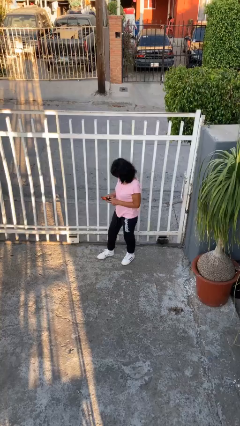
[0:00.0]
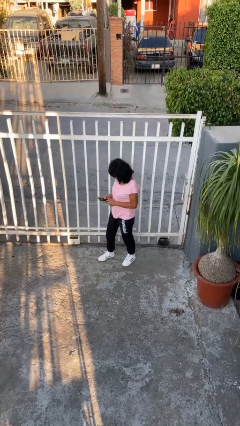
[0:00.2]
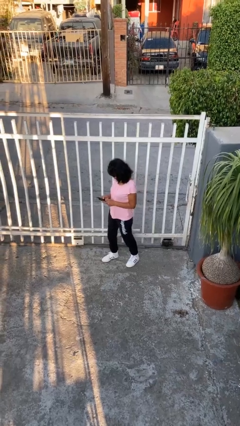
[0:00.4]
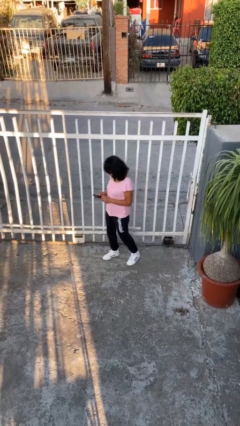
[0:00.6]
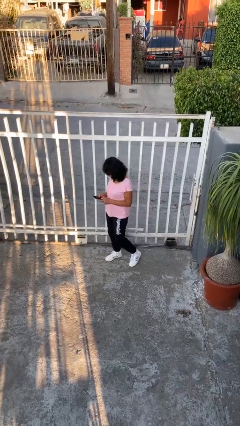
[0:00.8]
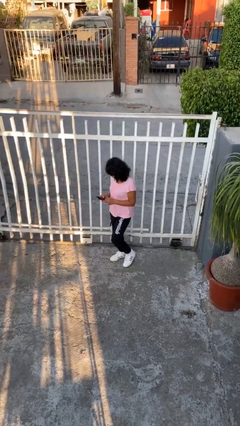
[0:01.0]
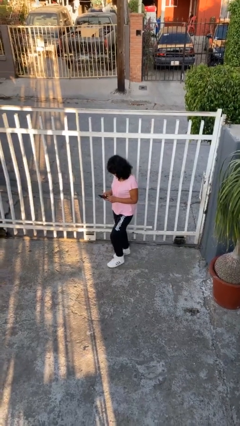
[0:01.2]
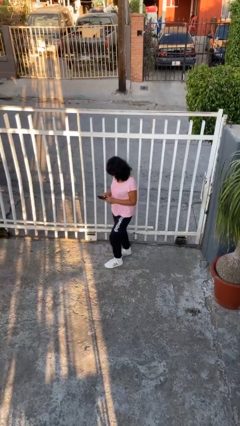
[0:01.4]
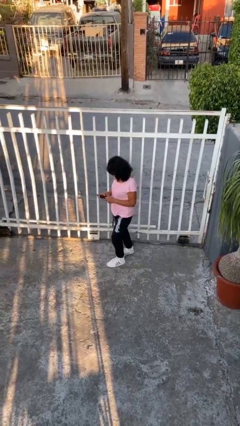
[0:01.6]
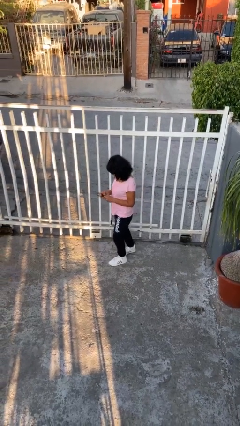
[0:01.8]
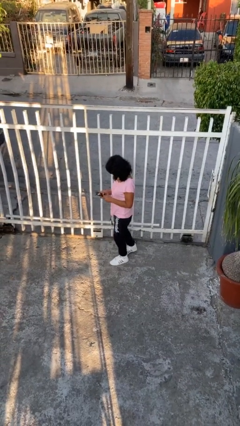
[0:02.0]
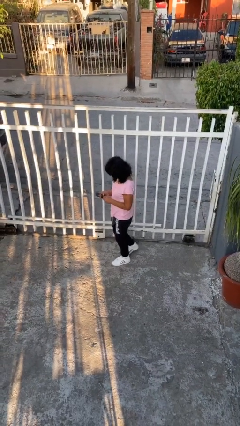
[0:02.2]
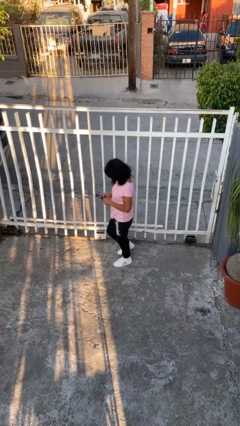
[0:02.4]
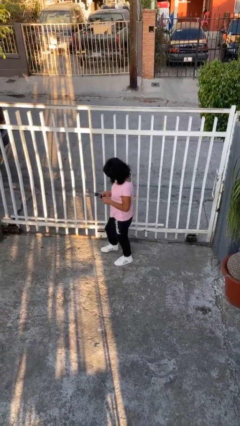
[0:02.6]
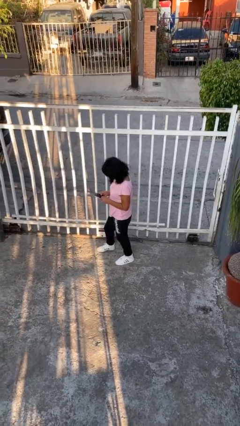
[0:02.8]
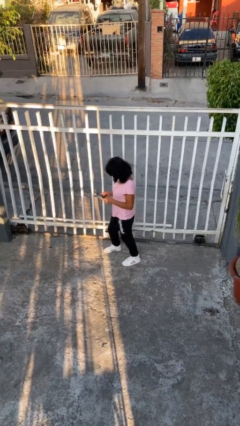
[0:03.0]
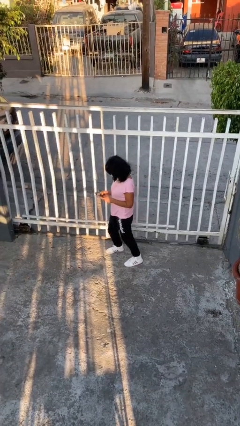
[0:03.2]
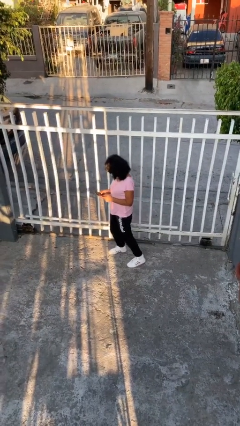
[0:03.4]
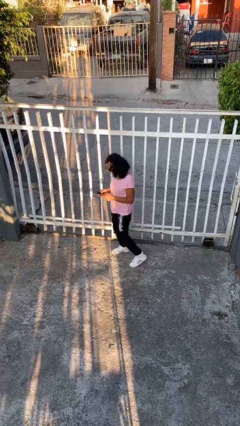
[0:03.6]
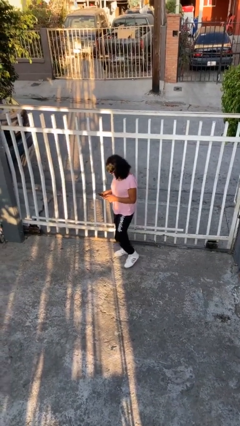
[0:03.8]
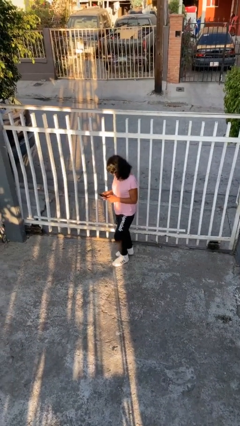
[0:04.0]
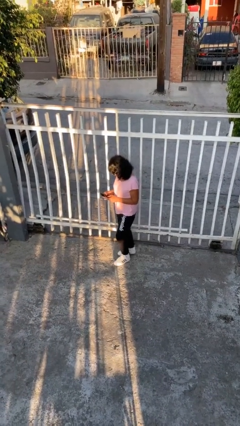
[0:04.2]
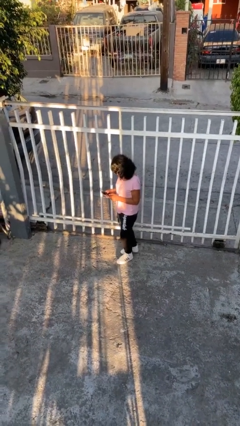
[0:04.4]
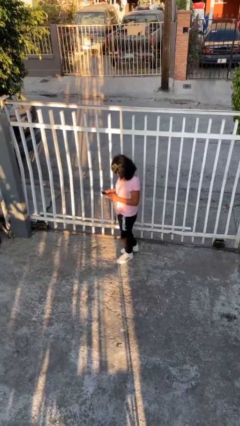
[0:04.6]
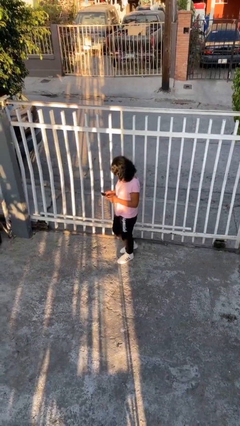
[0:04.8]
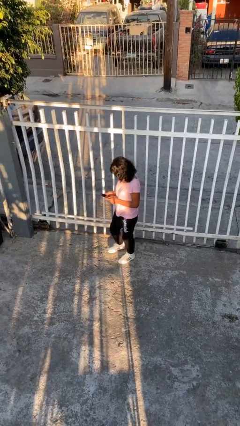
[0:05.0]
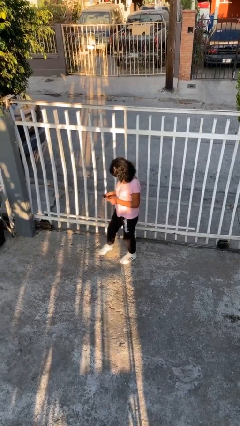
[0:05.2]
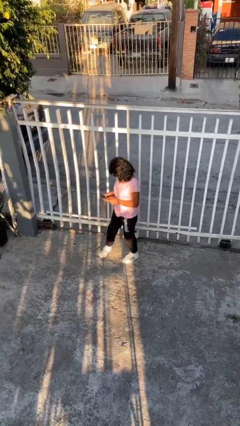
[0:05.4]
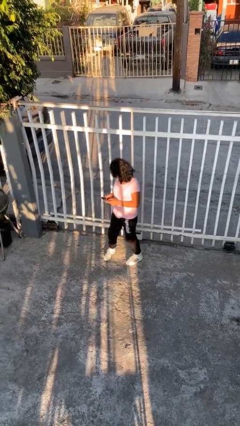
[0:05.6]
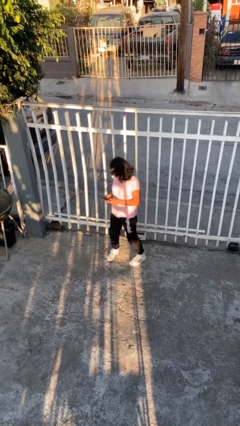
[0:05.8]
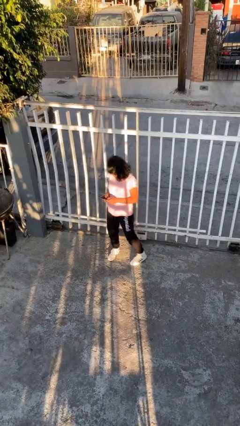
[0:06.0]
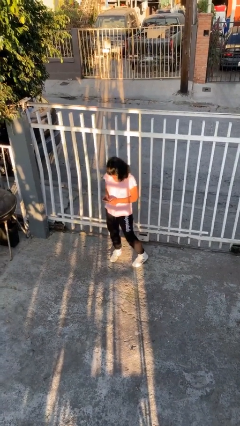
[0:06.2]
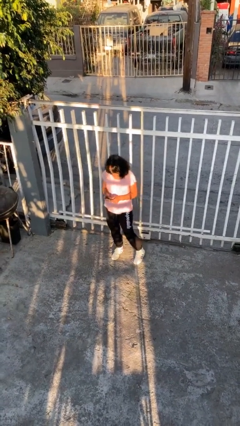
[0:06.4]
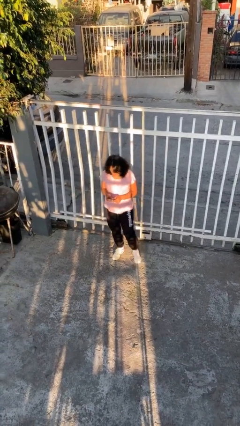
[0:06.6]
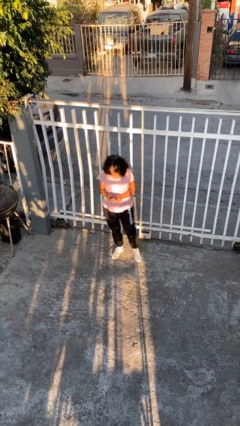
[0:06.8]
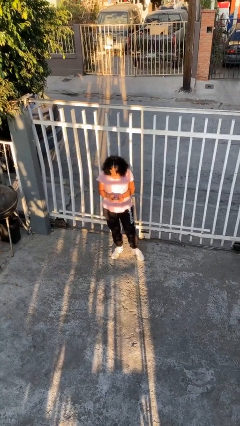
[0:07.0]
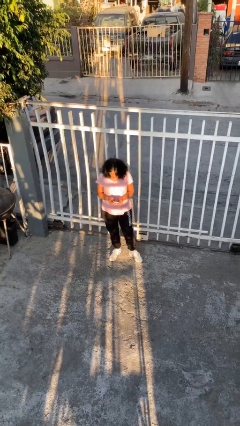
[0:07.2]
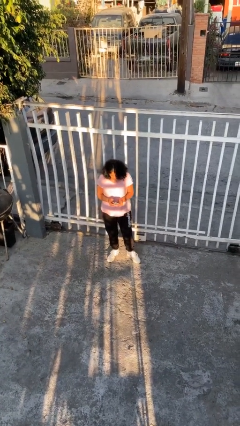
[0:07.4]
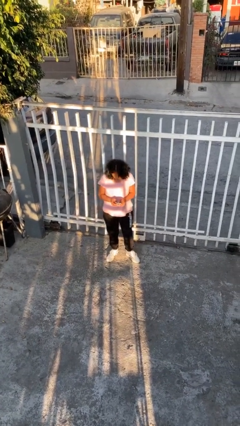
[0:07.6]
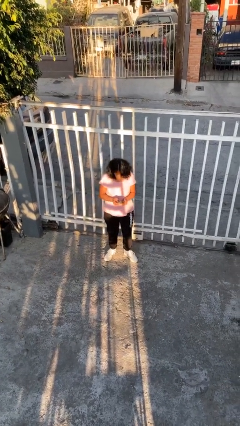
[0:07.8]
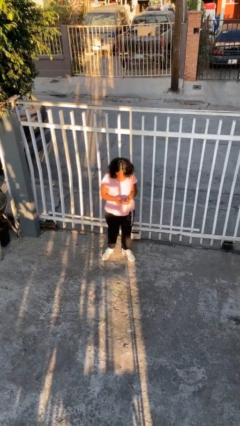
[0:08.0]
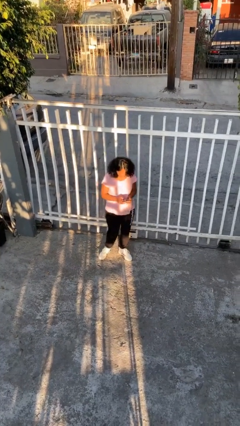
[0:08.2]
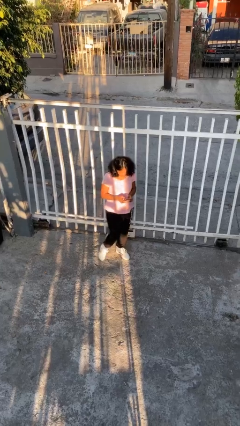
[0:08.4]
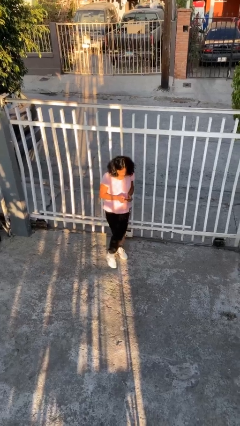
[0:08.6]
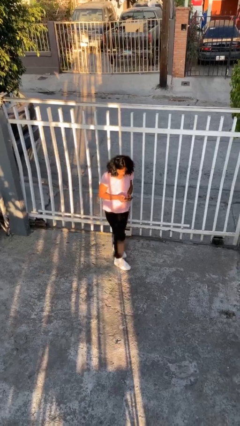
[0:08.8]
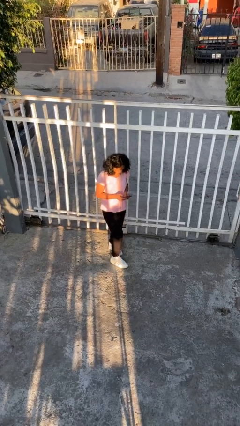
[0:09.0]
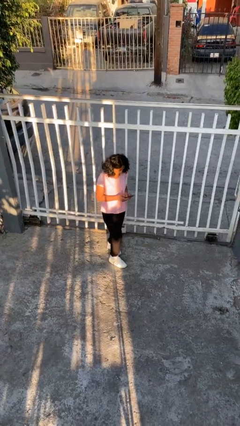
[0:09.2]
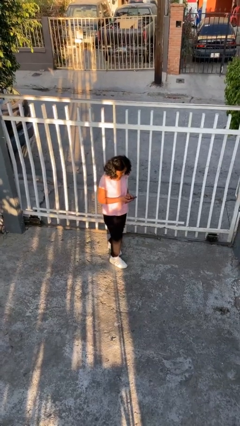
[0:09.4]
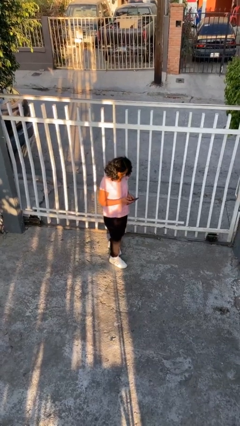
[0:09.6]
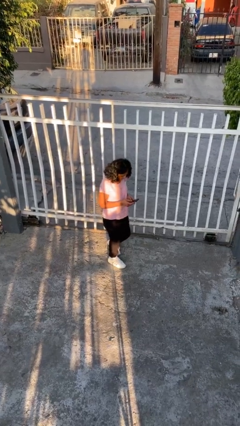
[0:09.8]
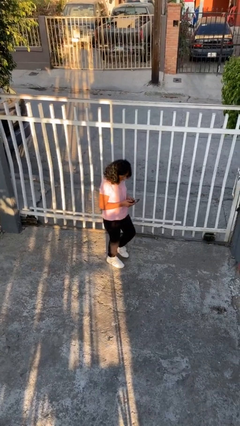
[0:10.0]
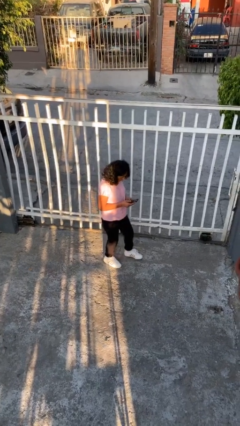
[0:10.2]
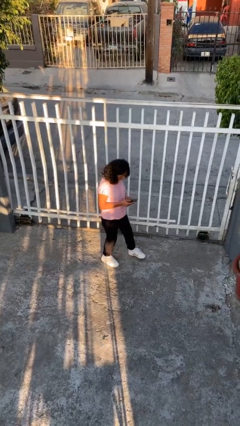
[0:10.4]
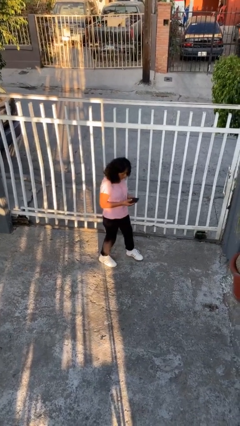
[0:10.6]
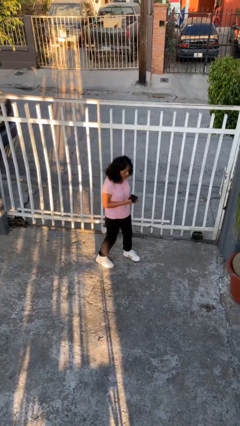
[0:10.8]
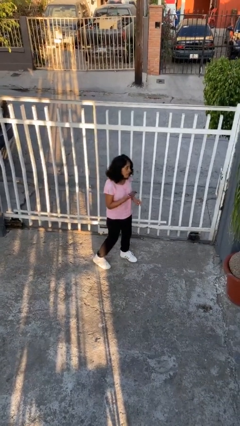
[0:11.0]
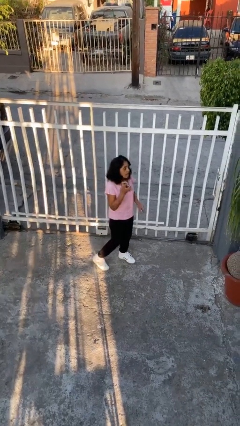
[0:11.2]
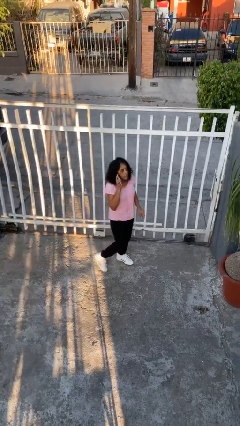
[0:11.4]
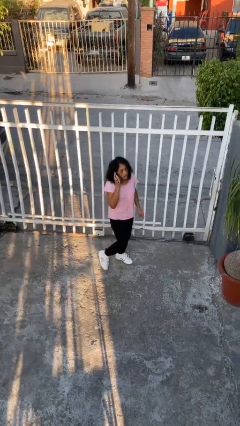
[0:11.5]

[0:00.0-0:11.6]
person texts on phone

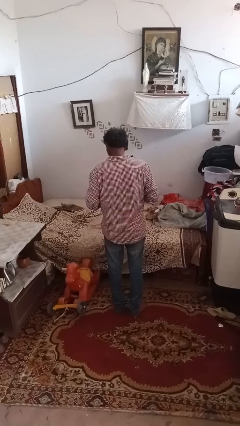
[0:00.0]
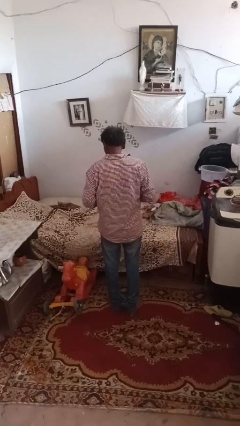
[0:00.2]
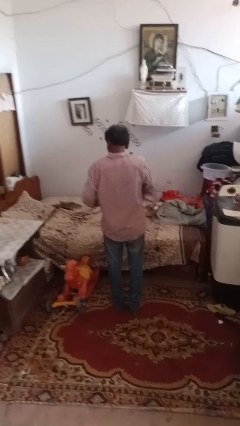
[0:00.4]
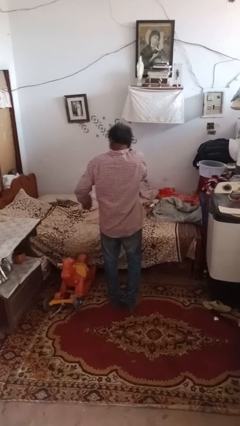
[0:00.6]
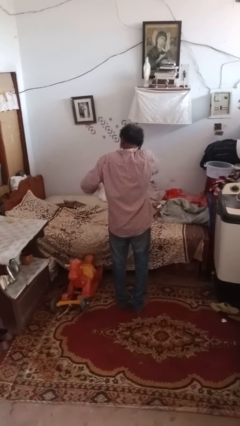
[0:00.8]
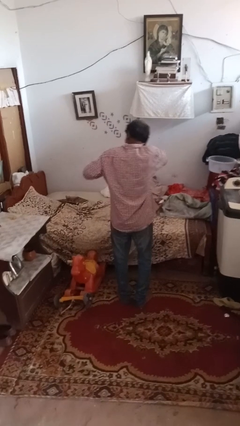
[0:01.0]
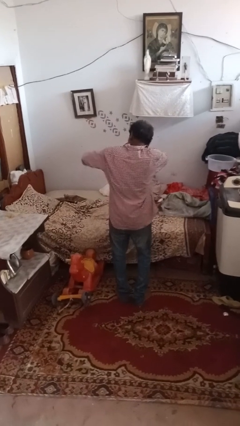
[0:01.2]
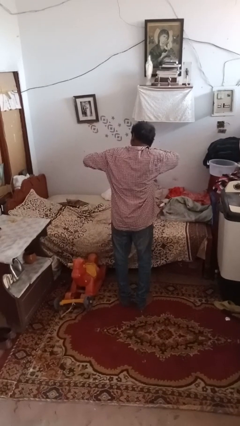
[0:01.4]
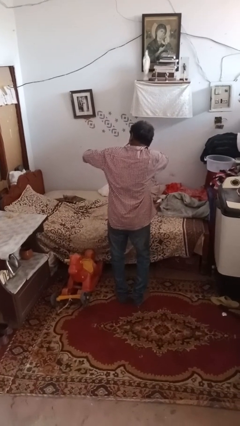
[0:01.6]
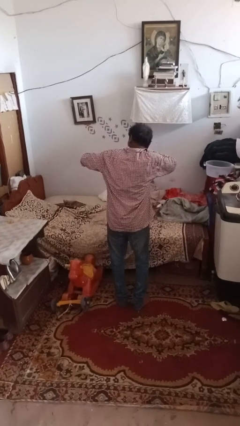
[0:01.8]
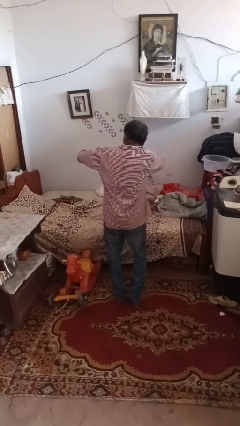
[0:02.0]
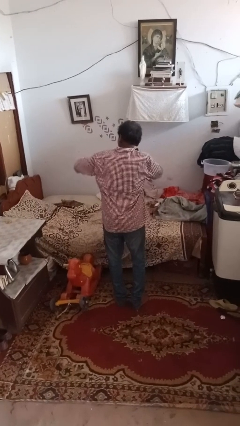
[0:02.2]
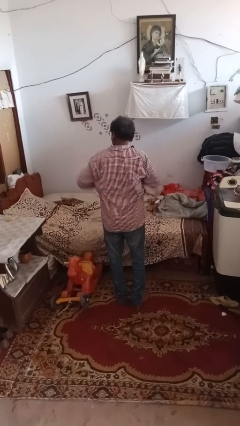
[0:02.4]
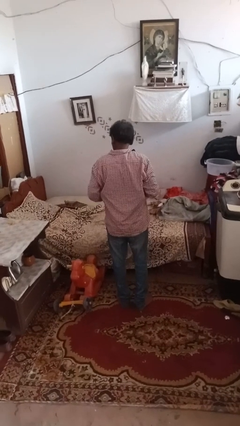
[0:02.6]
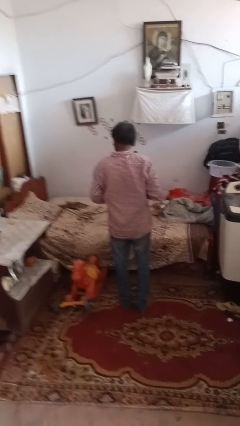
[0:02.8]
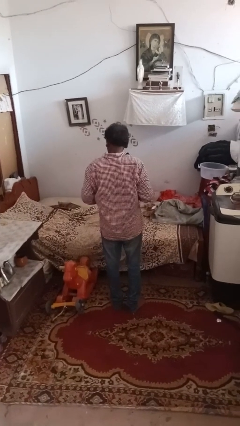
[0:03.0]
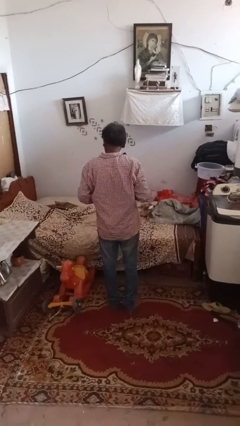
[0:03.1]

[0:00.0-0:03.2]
person dances in place

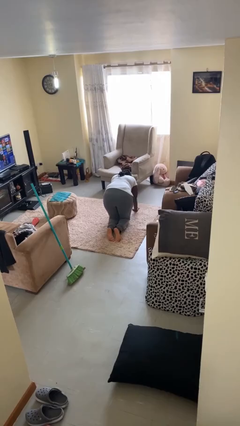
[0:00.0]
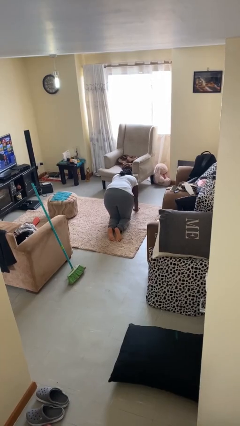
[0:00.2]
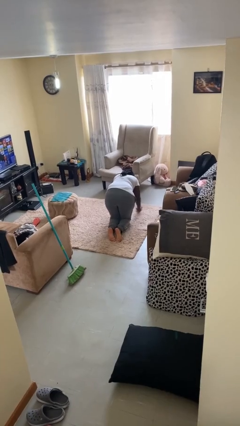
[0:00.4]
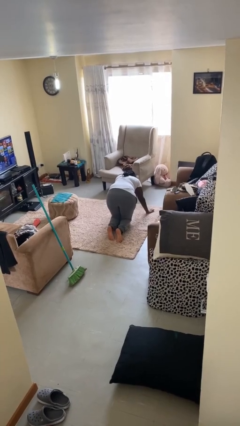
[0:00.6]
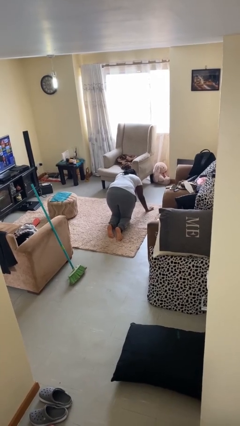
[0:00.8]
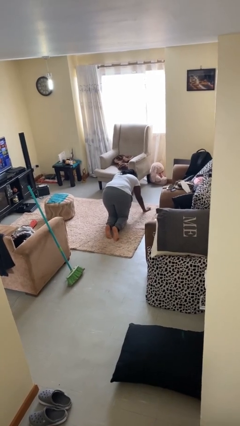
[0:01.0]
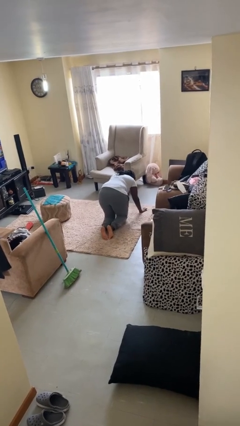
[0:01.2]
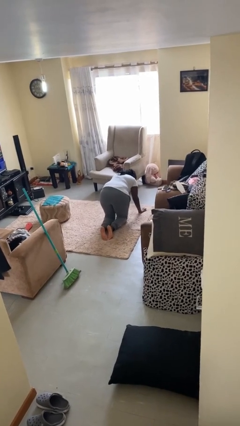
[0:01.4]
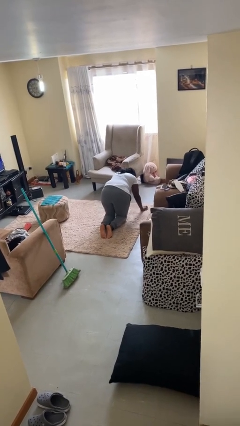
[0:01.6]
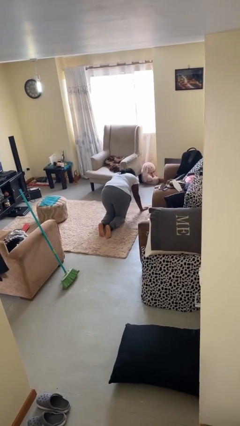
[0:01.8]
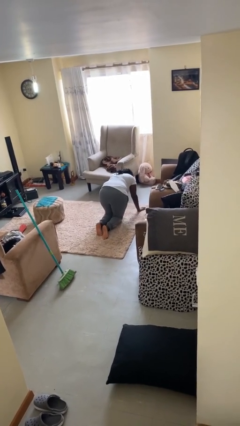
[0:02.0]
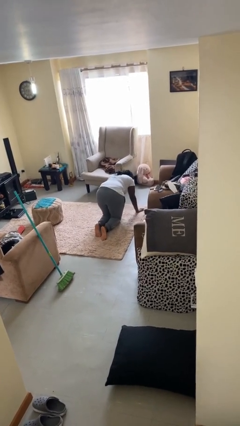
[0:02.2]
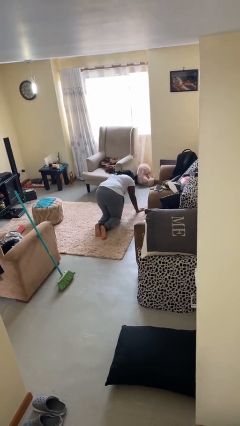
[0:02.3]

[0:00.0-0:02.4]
person crawls

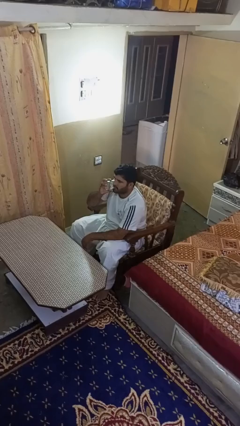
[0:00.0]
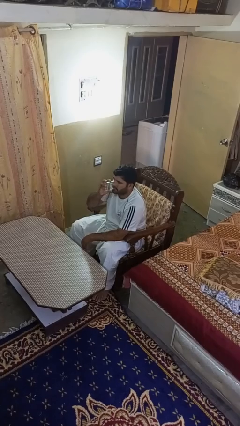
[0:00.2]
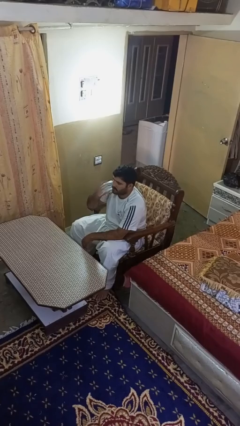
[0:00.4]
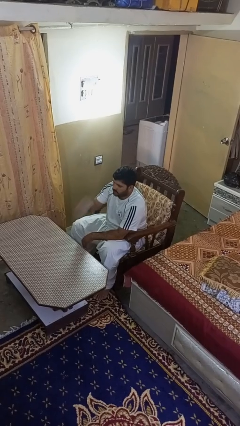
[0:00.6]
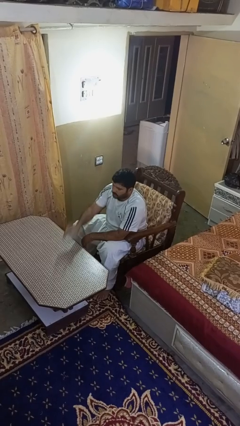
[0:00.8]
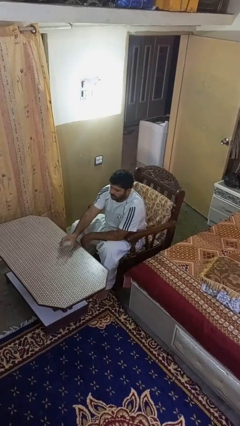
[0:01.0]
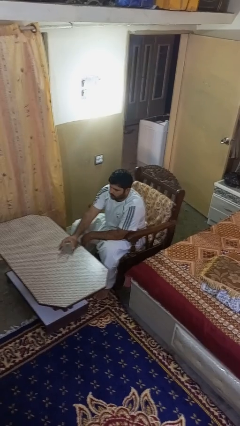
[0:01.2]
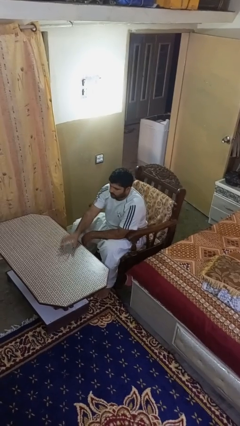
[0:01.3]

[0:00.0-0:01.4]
person puts down object on table
